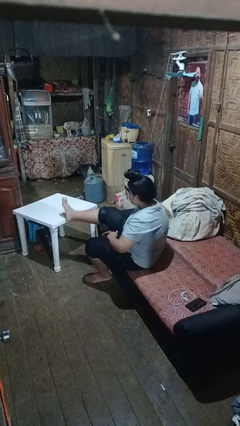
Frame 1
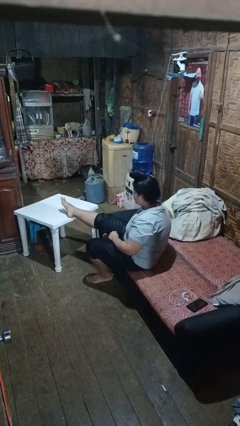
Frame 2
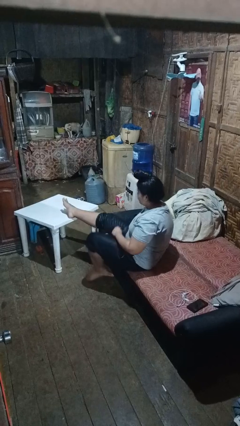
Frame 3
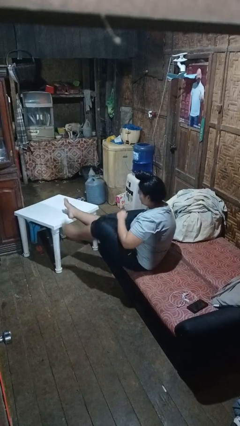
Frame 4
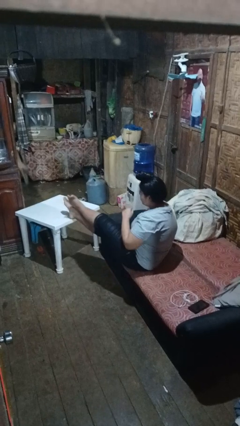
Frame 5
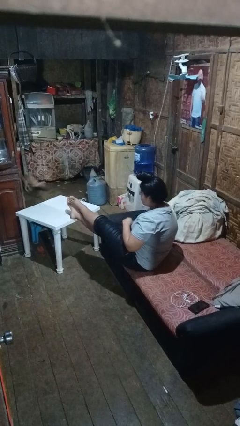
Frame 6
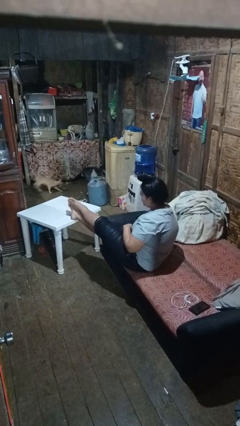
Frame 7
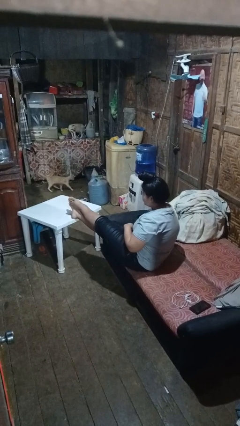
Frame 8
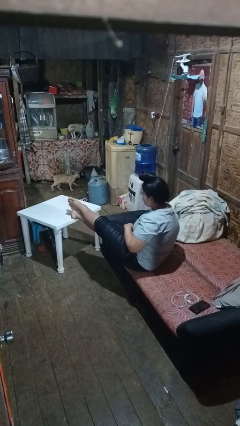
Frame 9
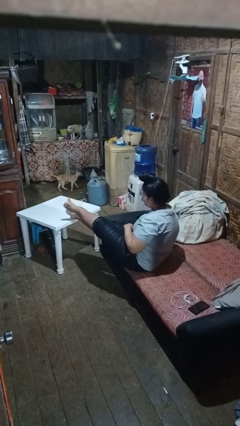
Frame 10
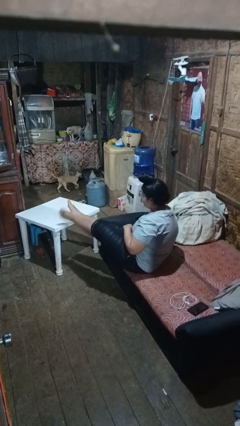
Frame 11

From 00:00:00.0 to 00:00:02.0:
person puts feet up

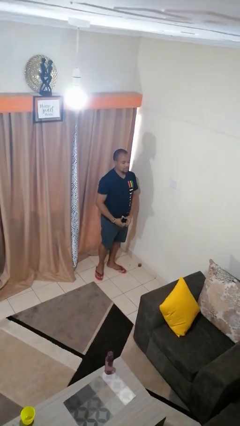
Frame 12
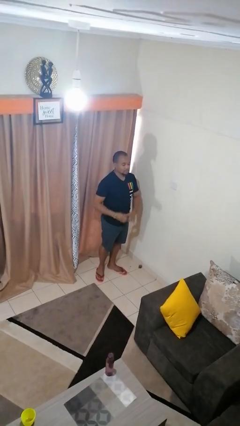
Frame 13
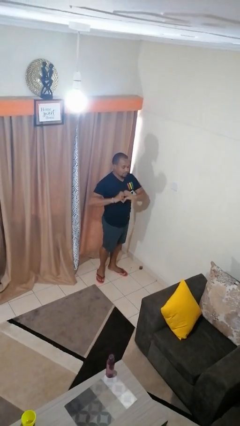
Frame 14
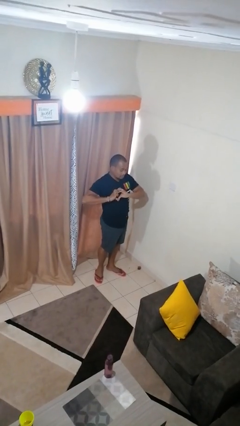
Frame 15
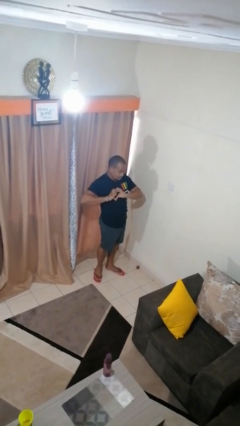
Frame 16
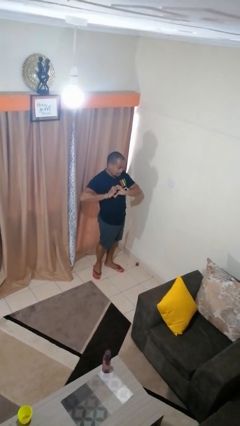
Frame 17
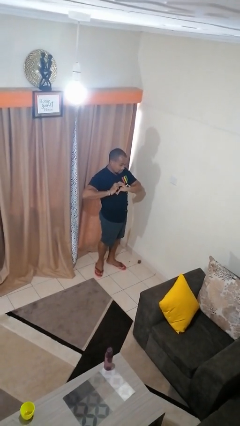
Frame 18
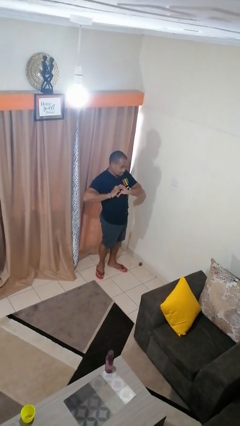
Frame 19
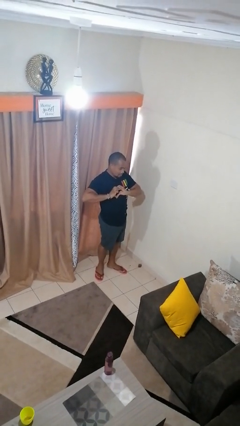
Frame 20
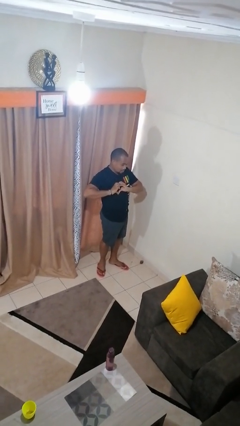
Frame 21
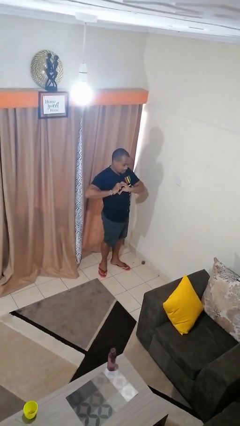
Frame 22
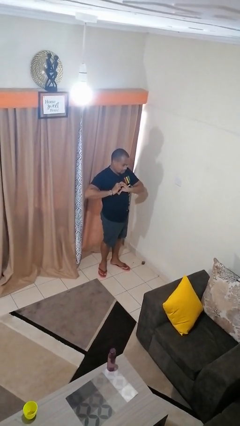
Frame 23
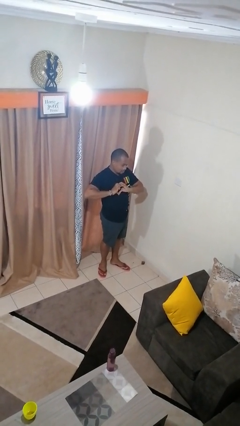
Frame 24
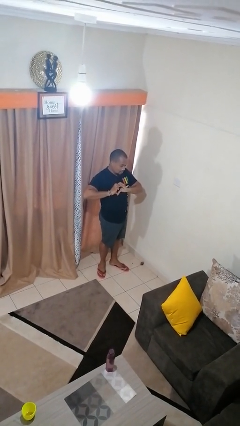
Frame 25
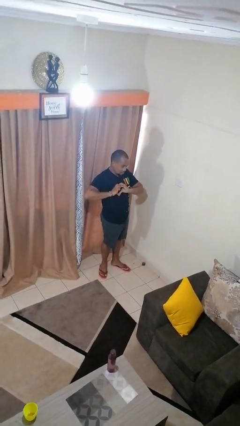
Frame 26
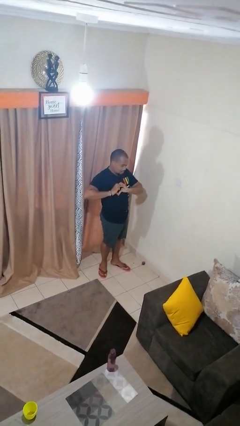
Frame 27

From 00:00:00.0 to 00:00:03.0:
person gestures heart

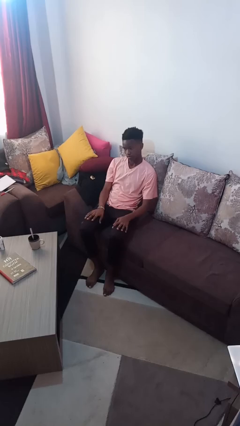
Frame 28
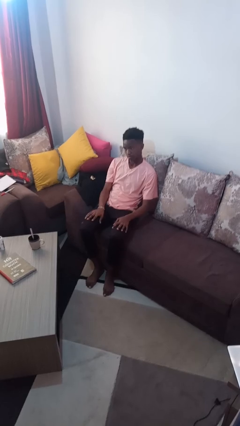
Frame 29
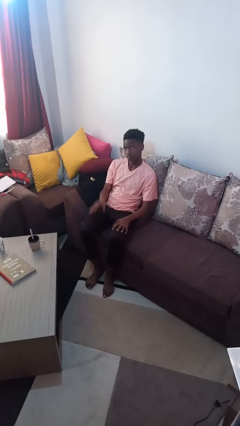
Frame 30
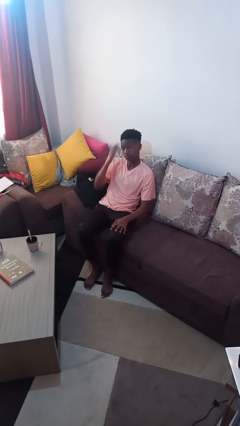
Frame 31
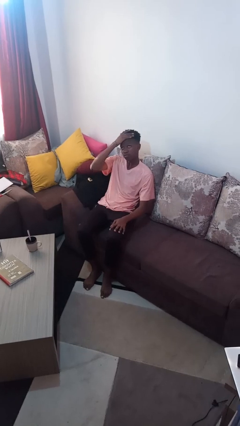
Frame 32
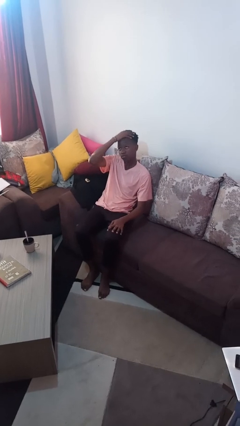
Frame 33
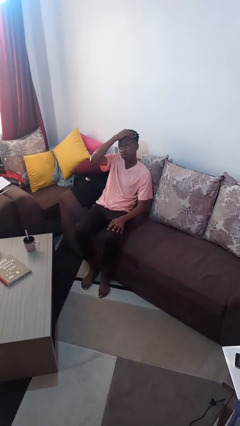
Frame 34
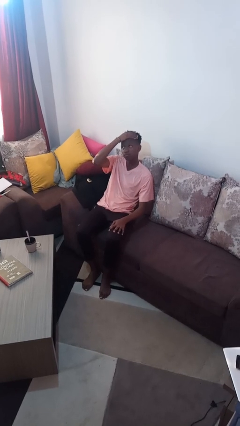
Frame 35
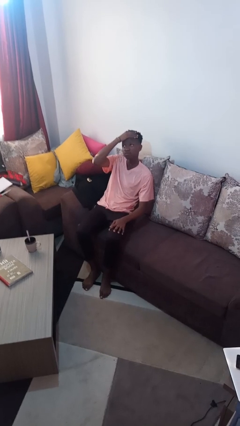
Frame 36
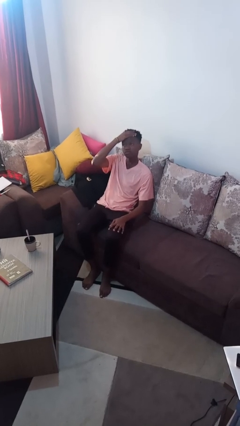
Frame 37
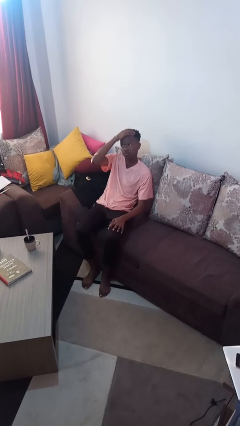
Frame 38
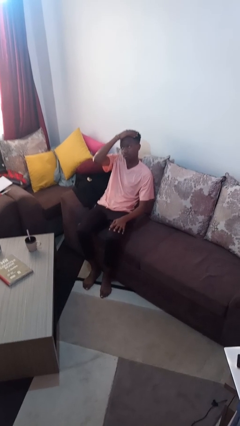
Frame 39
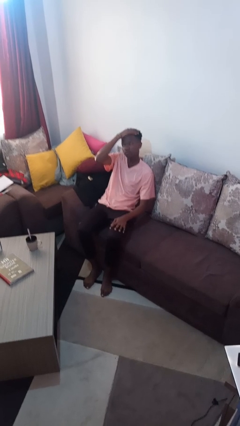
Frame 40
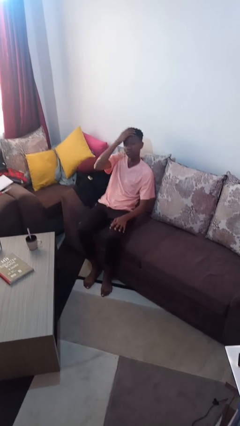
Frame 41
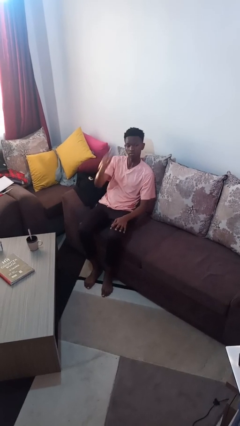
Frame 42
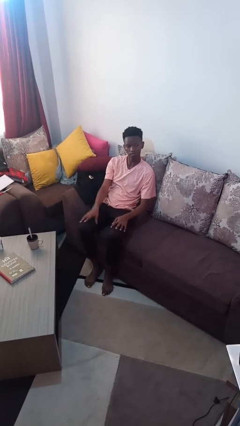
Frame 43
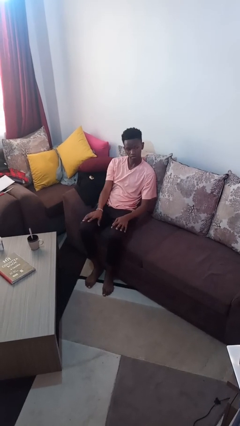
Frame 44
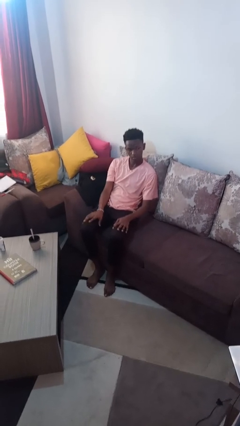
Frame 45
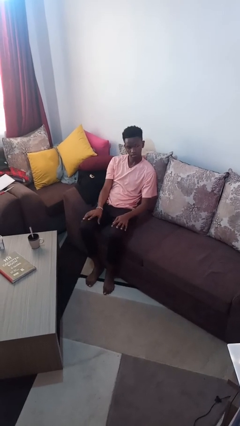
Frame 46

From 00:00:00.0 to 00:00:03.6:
person strokes hair

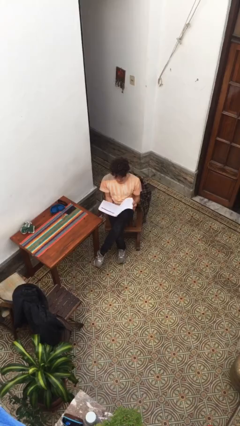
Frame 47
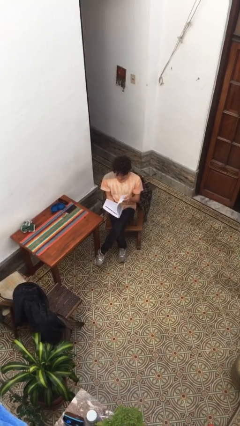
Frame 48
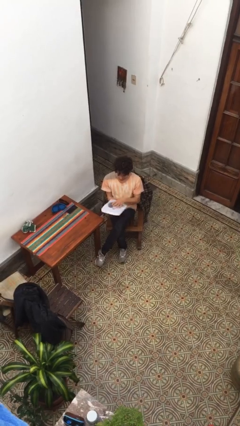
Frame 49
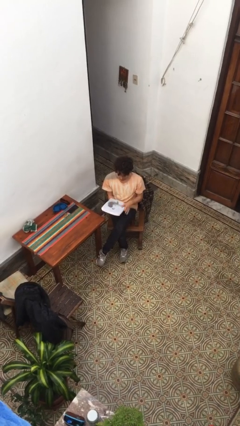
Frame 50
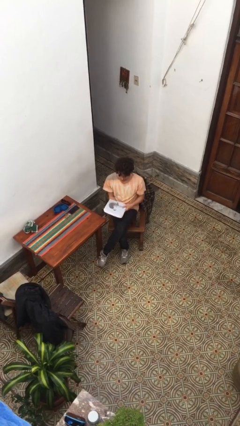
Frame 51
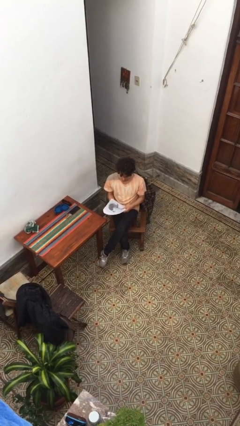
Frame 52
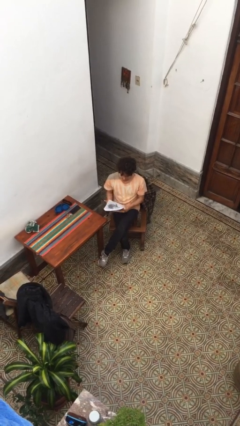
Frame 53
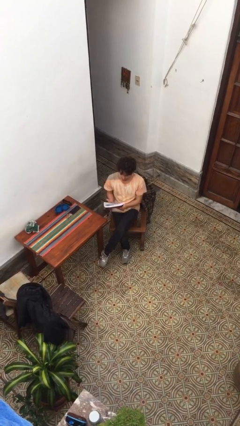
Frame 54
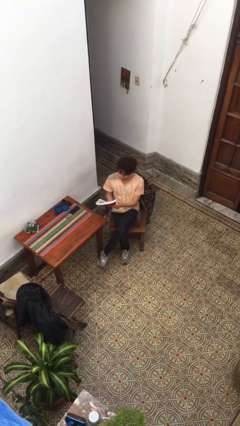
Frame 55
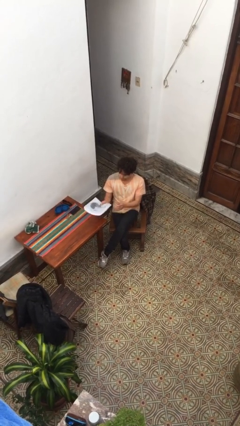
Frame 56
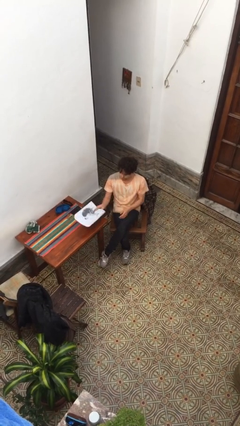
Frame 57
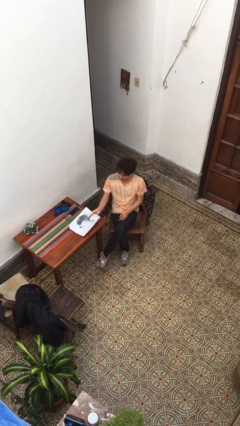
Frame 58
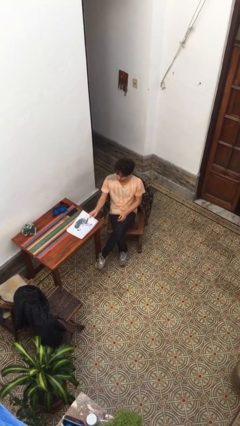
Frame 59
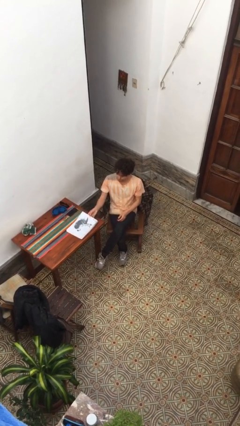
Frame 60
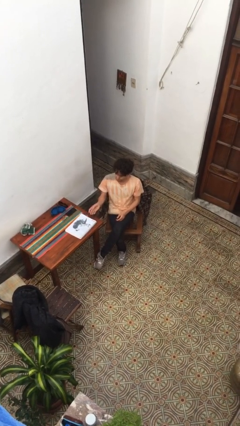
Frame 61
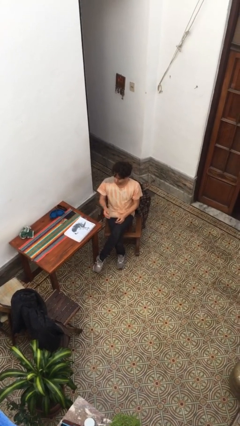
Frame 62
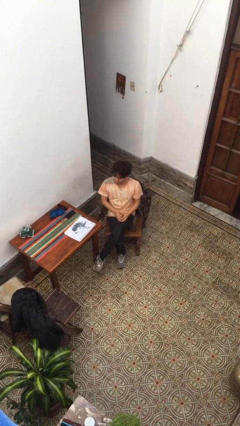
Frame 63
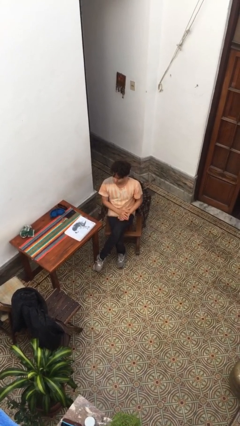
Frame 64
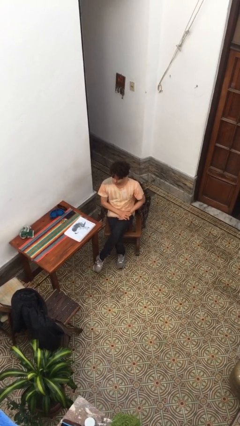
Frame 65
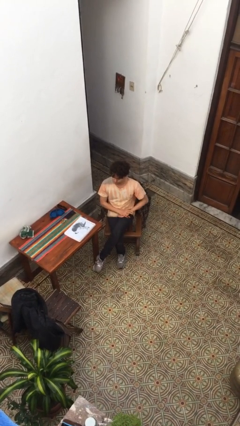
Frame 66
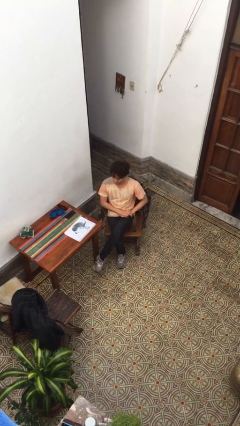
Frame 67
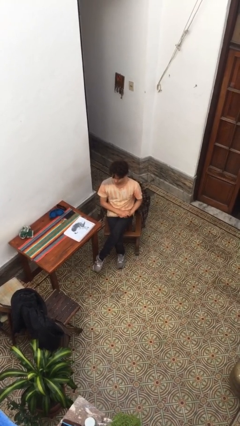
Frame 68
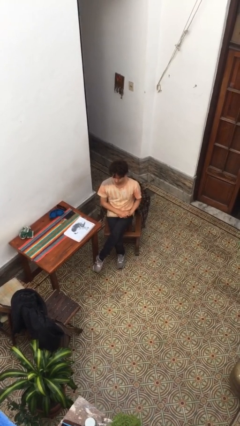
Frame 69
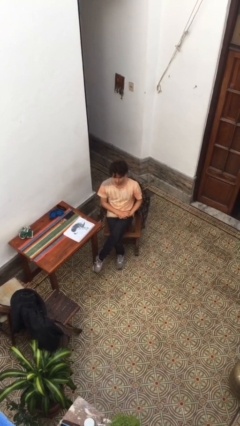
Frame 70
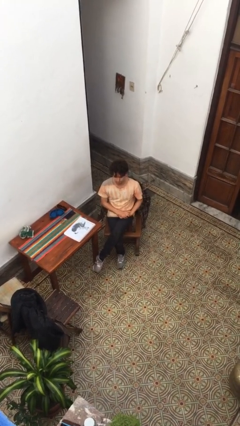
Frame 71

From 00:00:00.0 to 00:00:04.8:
person puts down object on table

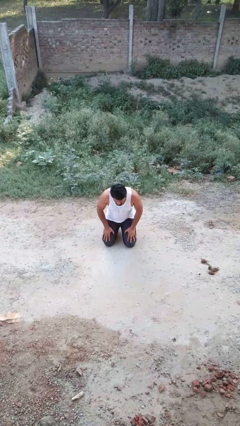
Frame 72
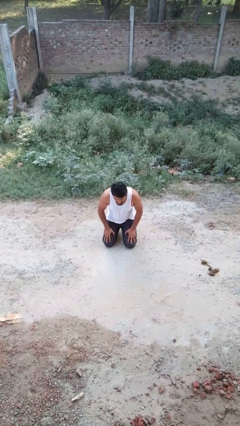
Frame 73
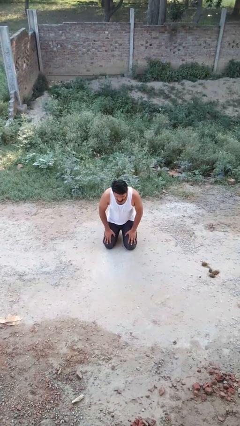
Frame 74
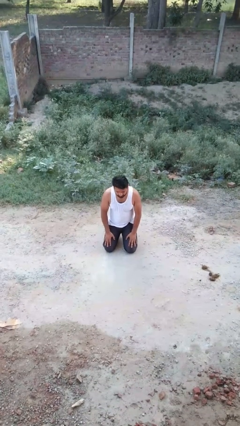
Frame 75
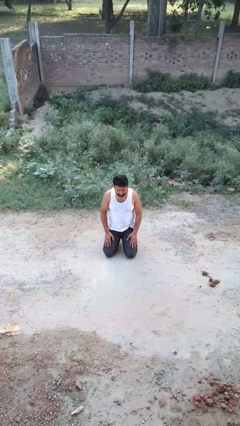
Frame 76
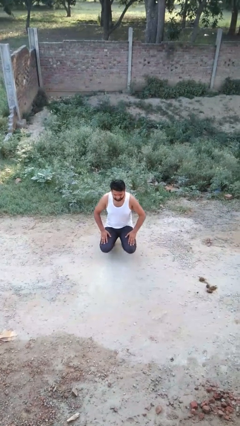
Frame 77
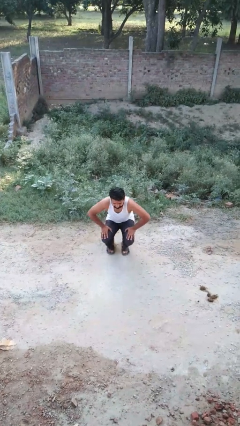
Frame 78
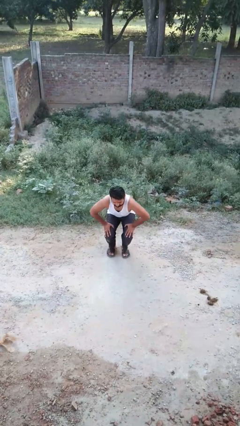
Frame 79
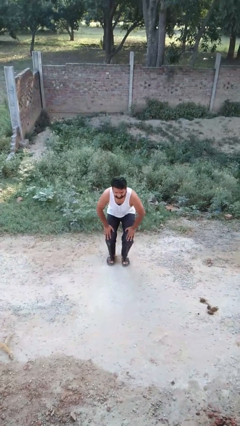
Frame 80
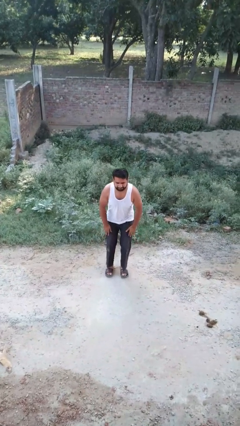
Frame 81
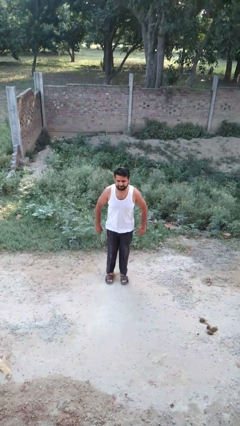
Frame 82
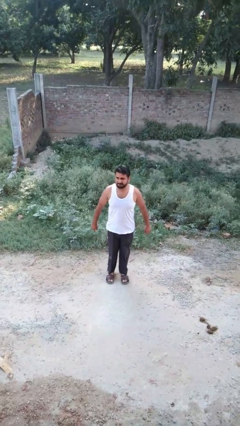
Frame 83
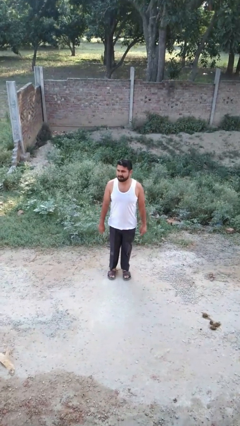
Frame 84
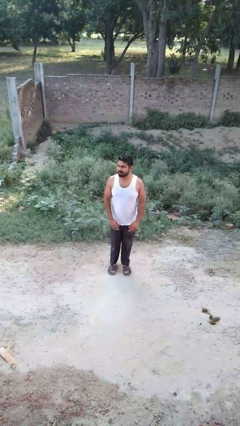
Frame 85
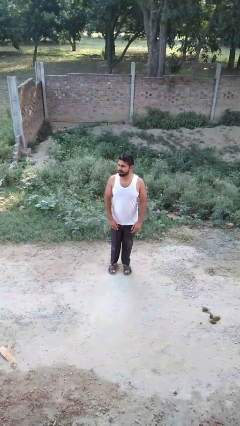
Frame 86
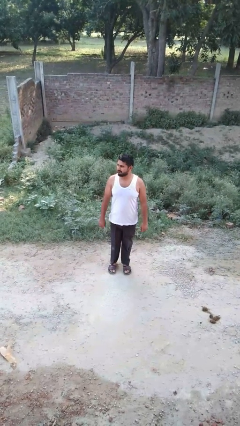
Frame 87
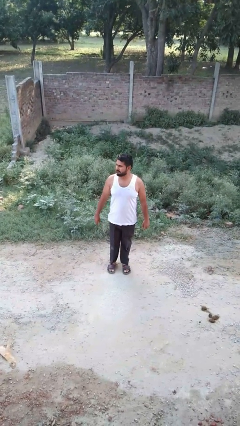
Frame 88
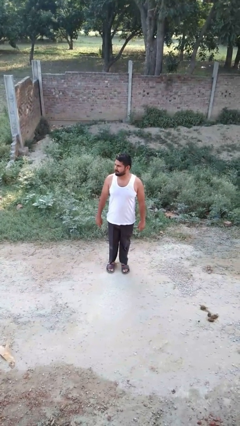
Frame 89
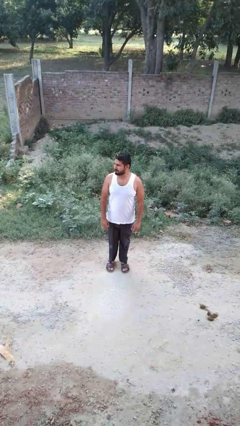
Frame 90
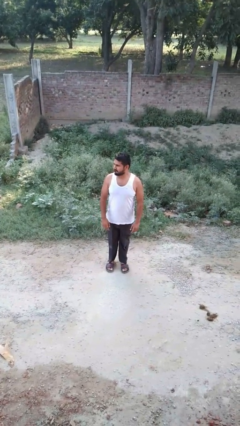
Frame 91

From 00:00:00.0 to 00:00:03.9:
person stands up from floor

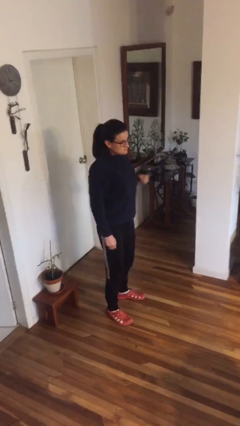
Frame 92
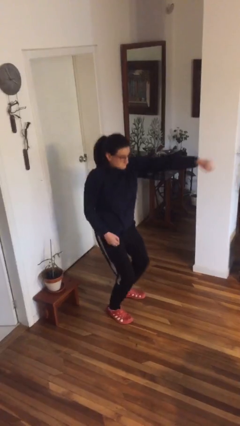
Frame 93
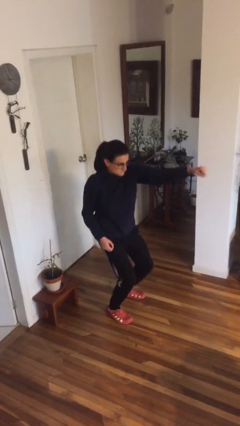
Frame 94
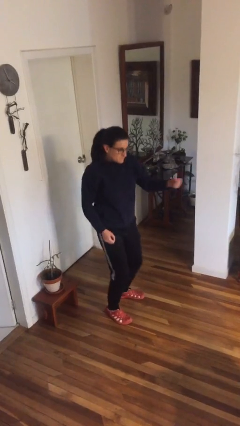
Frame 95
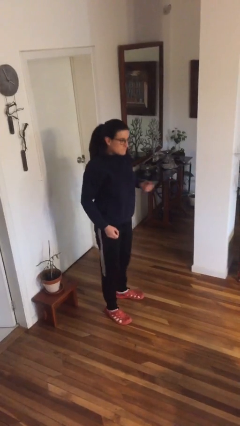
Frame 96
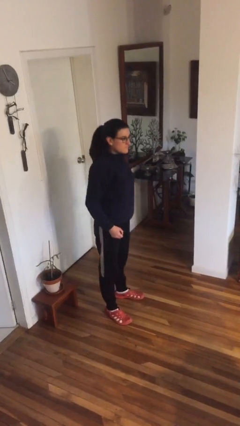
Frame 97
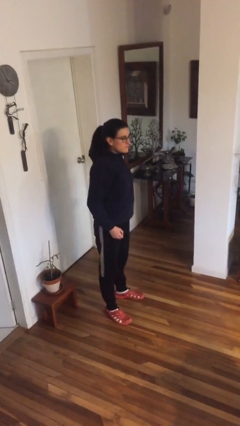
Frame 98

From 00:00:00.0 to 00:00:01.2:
person punches
